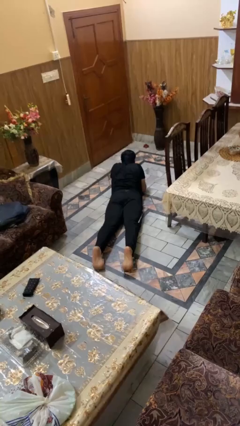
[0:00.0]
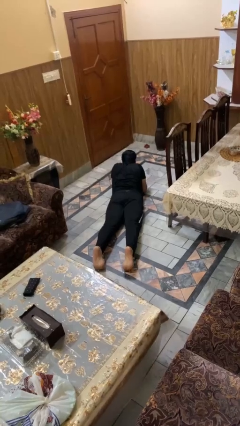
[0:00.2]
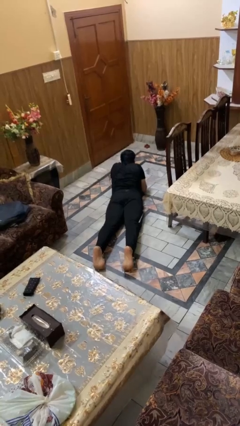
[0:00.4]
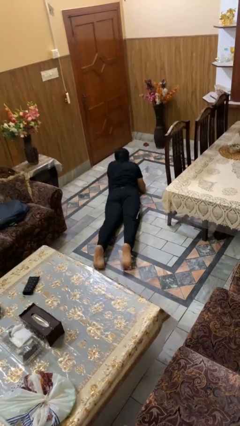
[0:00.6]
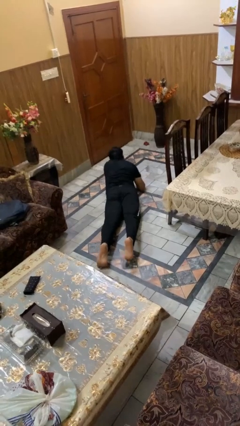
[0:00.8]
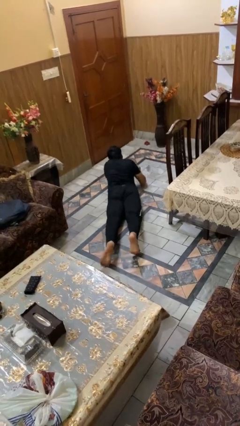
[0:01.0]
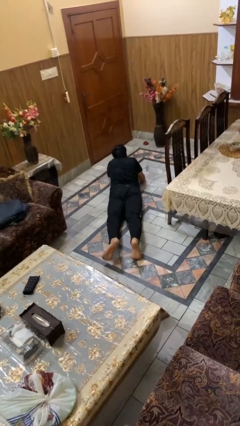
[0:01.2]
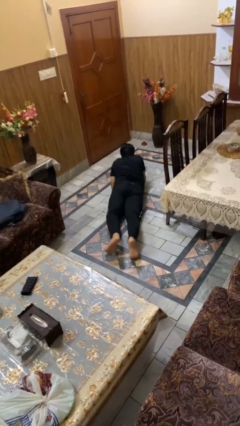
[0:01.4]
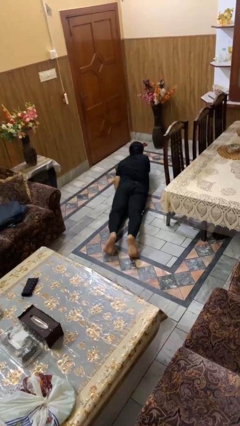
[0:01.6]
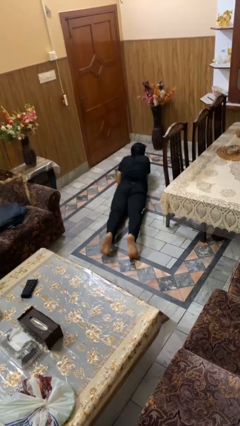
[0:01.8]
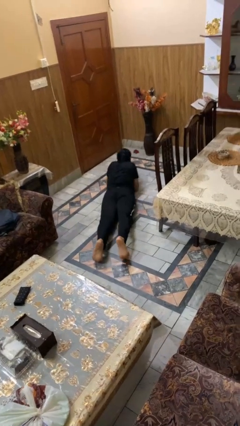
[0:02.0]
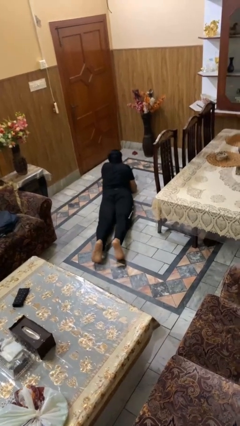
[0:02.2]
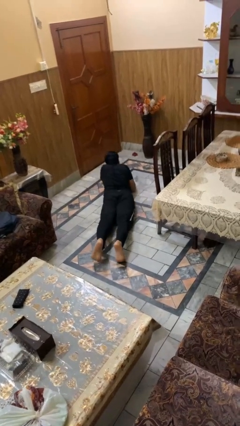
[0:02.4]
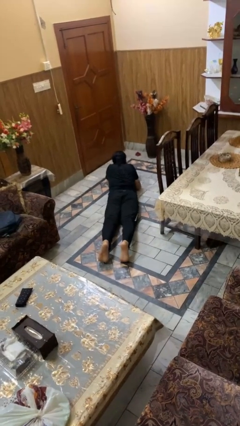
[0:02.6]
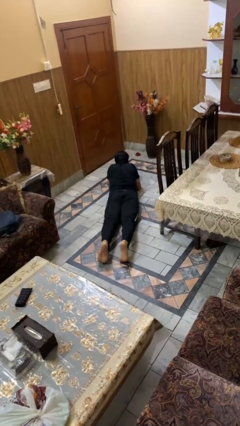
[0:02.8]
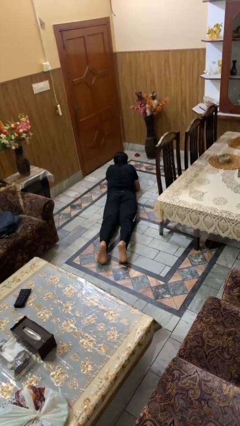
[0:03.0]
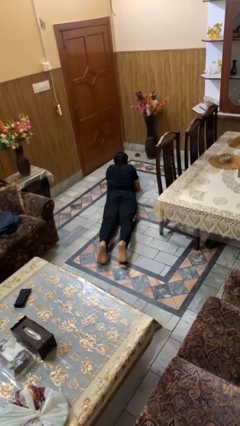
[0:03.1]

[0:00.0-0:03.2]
person crawls

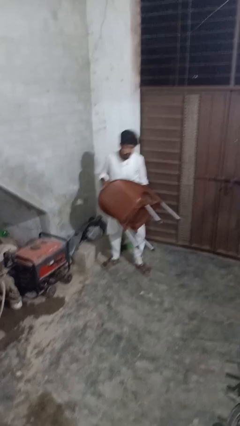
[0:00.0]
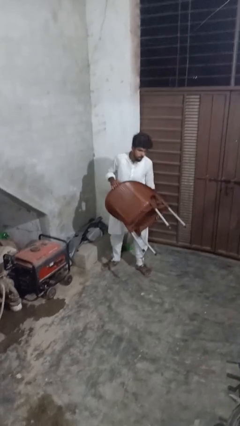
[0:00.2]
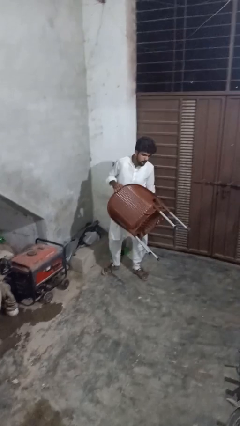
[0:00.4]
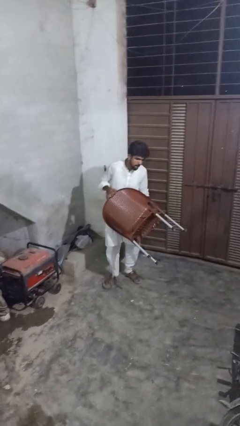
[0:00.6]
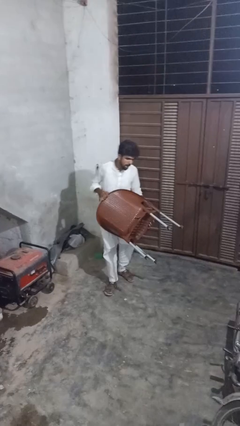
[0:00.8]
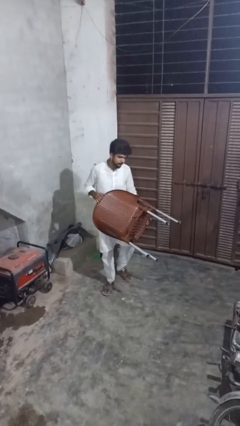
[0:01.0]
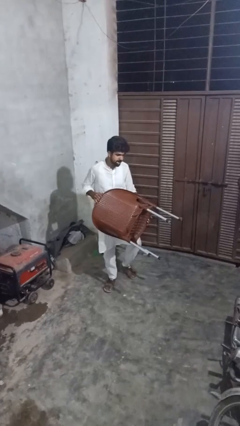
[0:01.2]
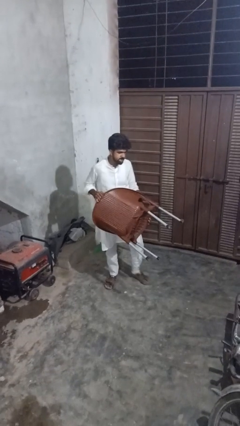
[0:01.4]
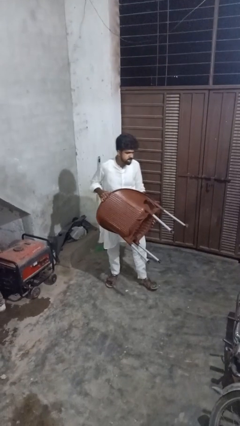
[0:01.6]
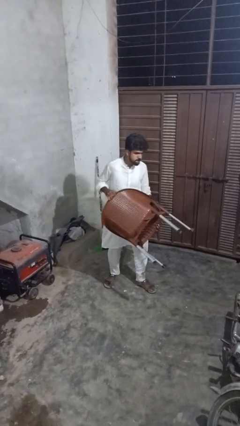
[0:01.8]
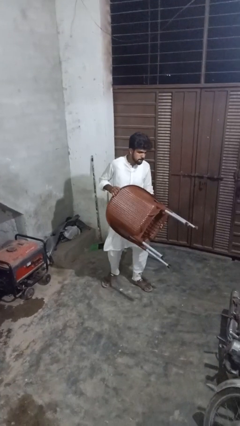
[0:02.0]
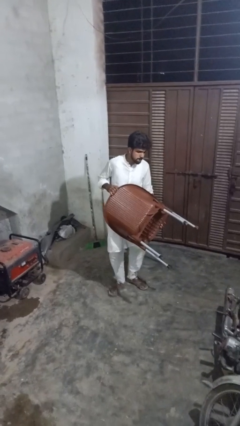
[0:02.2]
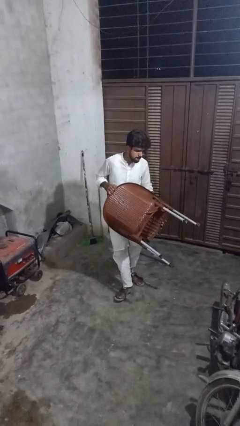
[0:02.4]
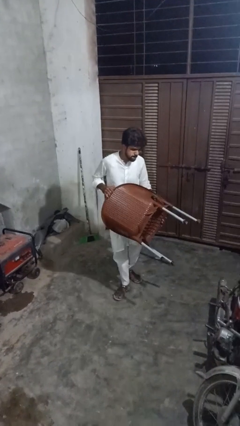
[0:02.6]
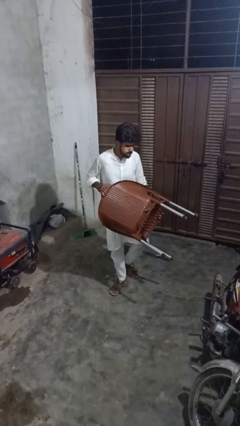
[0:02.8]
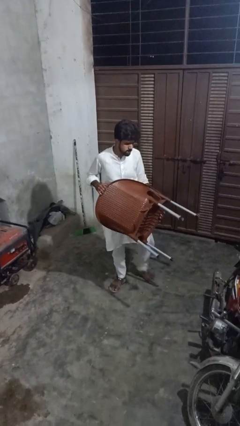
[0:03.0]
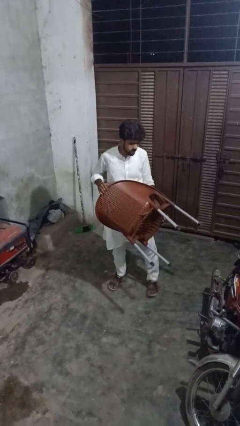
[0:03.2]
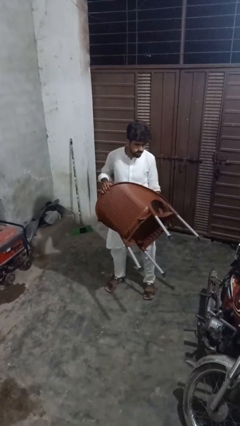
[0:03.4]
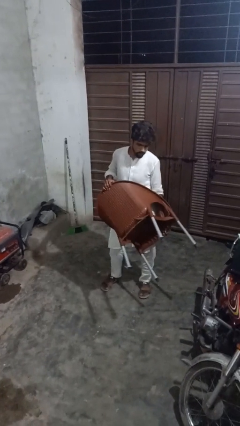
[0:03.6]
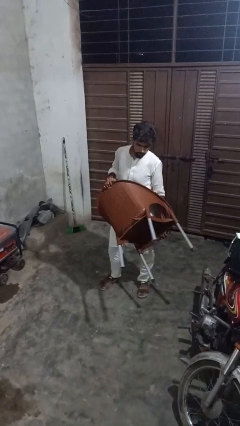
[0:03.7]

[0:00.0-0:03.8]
person carries furniture

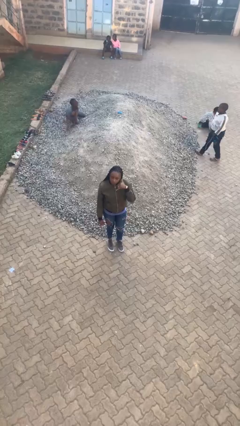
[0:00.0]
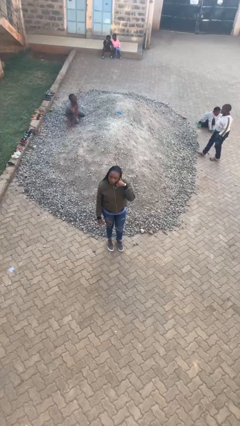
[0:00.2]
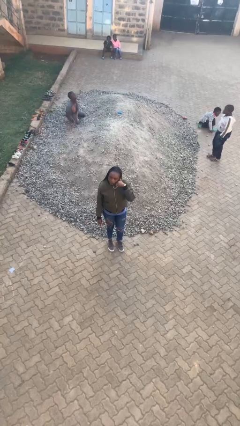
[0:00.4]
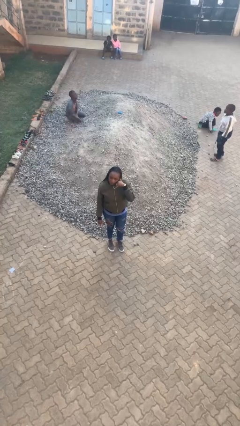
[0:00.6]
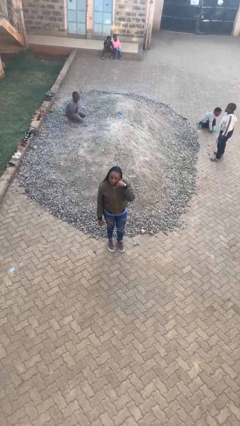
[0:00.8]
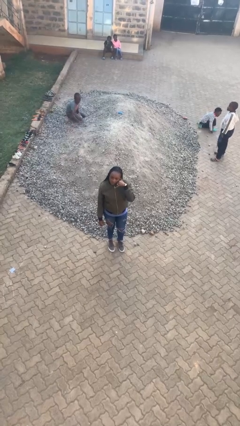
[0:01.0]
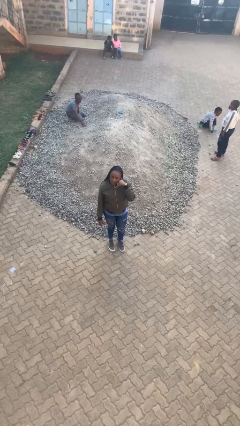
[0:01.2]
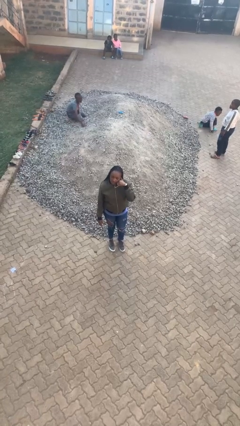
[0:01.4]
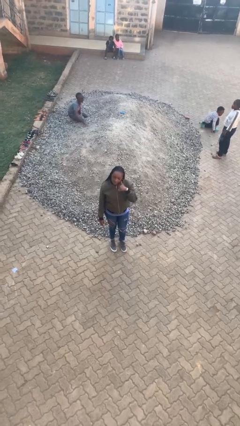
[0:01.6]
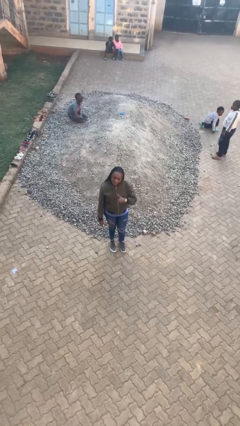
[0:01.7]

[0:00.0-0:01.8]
person gestures call me

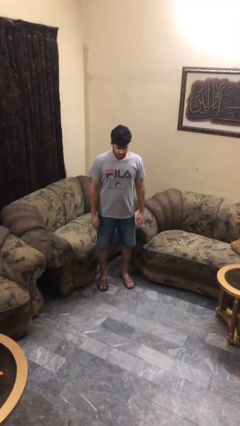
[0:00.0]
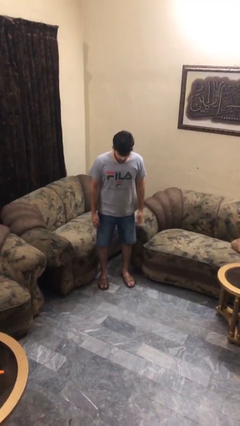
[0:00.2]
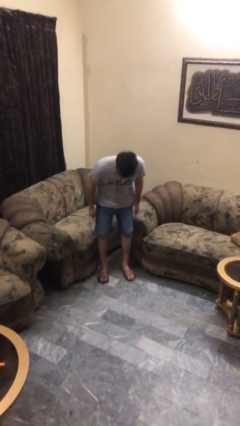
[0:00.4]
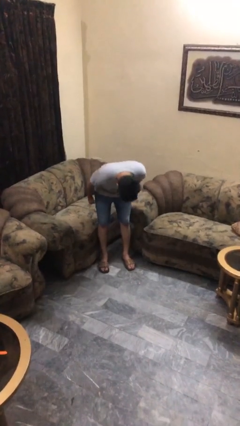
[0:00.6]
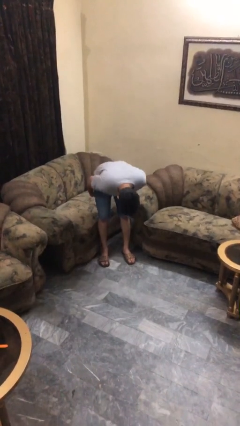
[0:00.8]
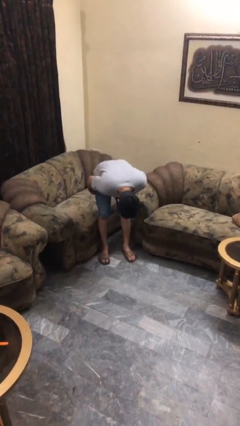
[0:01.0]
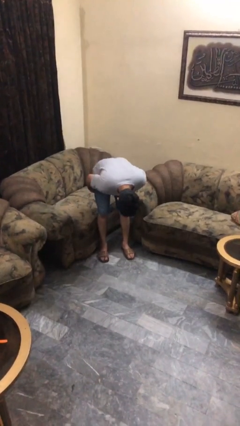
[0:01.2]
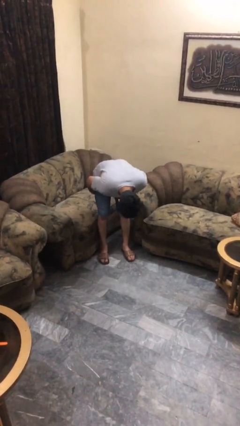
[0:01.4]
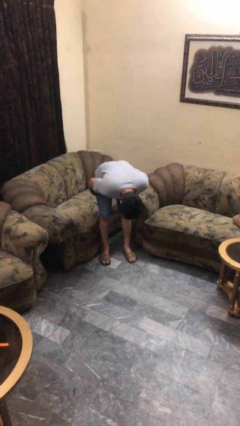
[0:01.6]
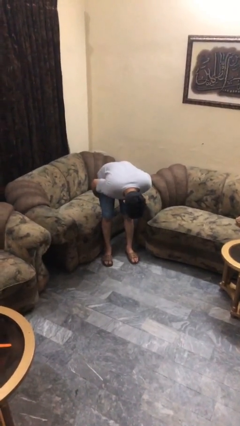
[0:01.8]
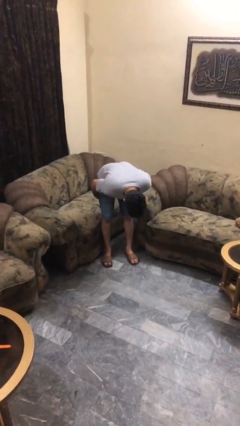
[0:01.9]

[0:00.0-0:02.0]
person bows

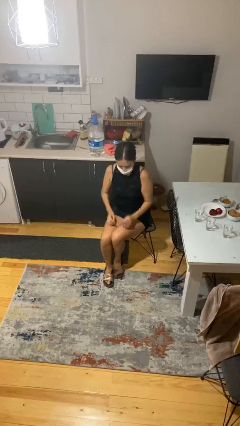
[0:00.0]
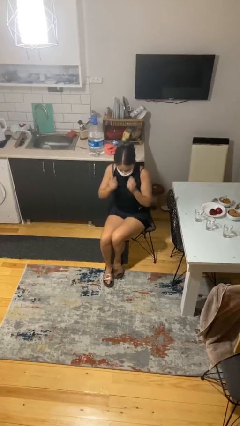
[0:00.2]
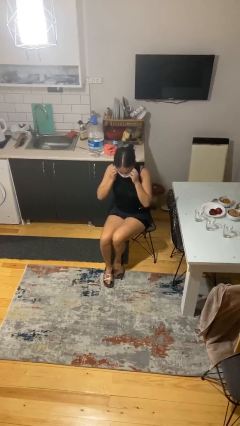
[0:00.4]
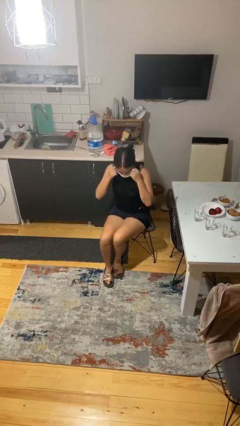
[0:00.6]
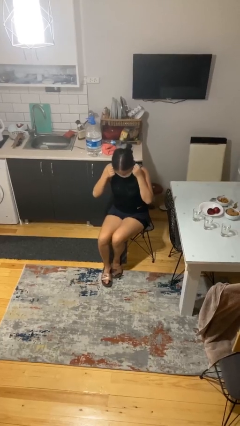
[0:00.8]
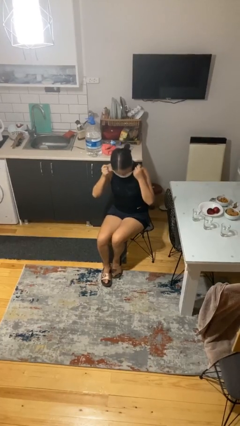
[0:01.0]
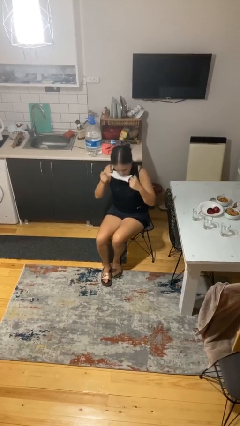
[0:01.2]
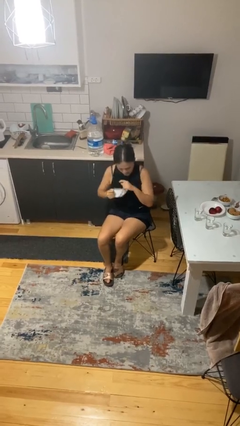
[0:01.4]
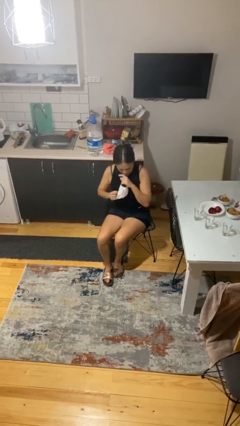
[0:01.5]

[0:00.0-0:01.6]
person takes off facemask

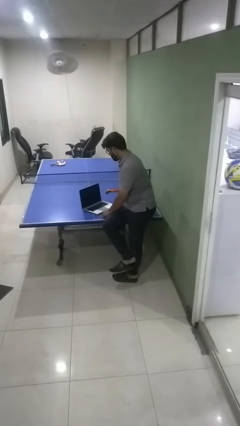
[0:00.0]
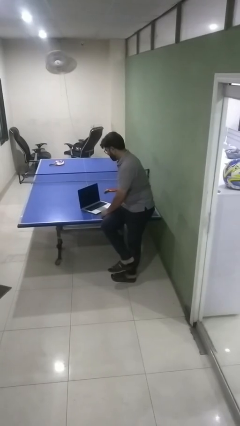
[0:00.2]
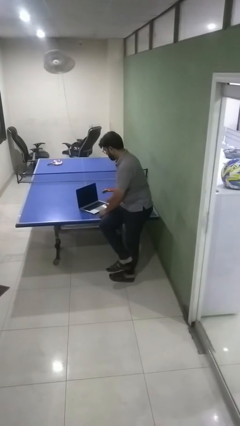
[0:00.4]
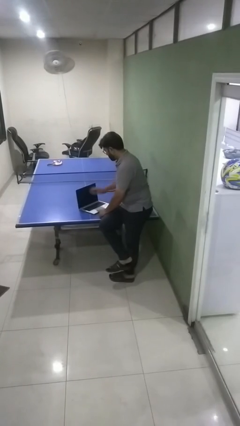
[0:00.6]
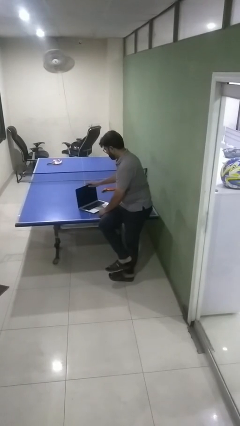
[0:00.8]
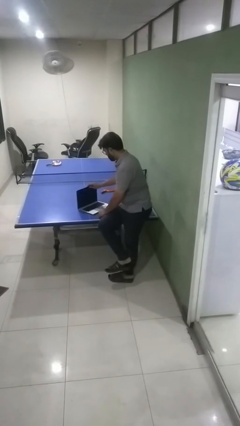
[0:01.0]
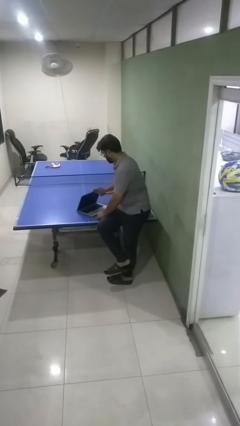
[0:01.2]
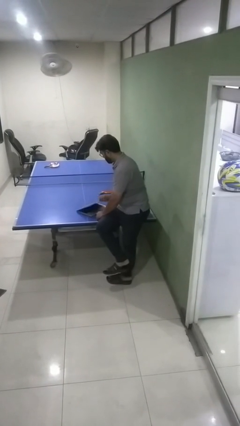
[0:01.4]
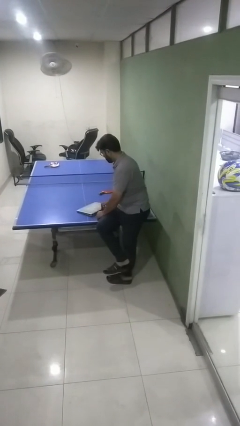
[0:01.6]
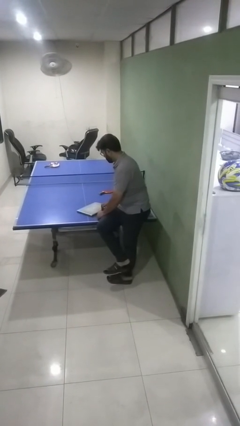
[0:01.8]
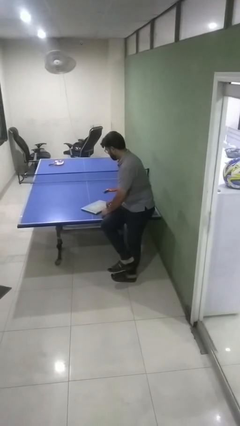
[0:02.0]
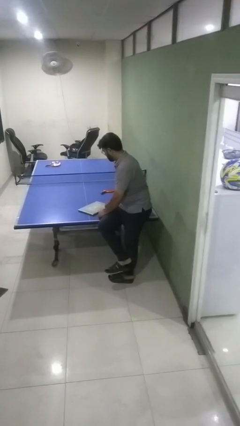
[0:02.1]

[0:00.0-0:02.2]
person closes laptop

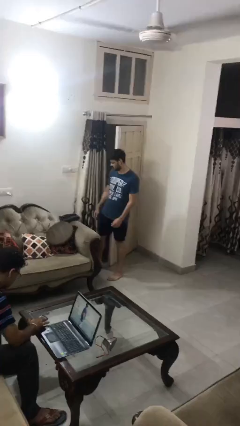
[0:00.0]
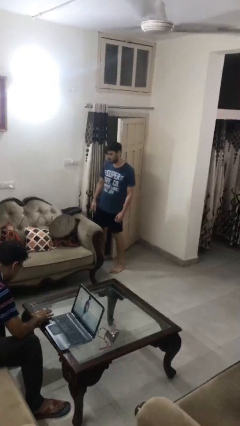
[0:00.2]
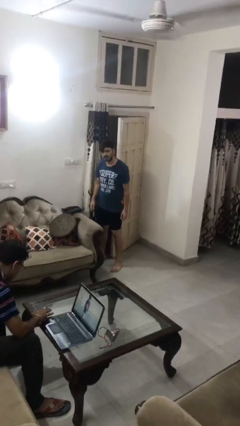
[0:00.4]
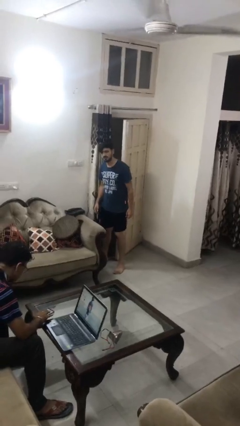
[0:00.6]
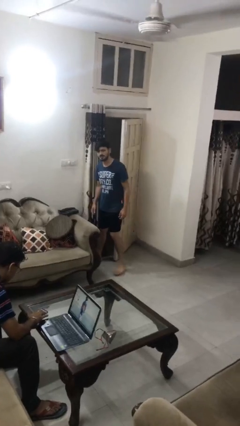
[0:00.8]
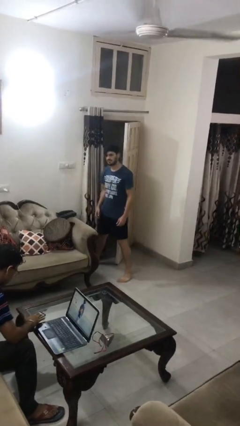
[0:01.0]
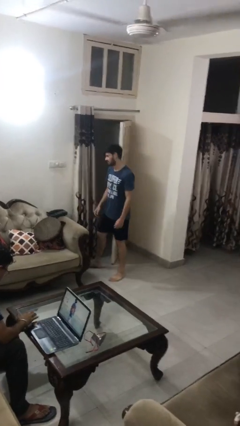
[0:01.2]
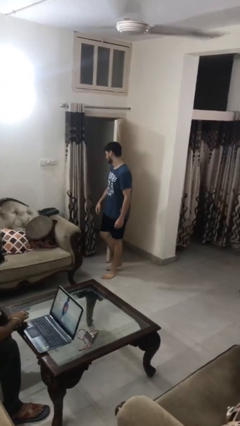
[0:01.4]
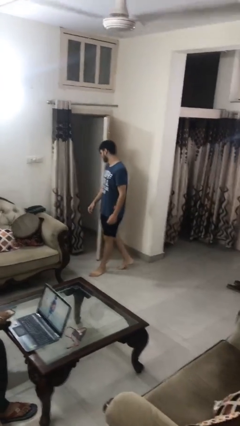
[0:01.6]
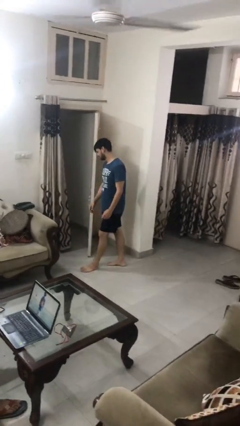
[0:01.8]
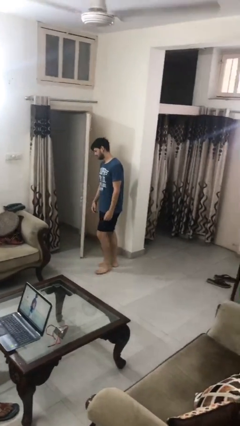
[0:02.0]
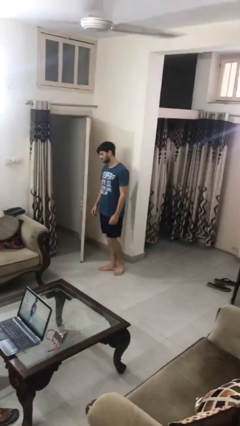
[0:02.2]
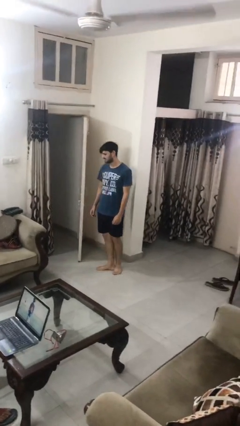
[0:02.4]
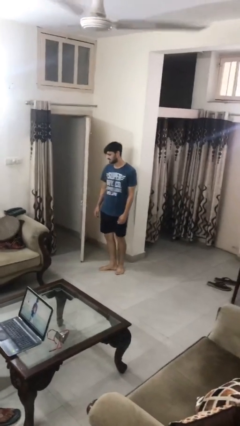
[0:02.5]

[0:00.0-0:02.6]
person opens facility door
